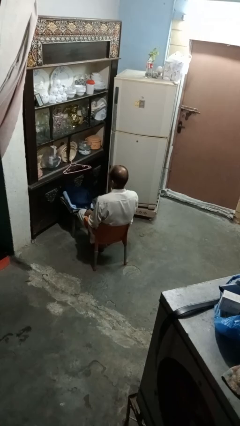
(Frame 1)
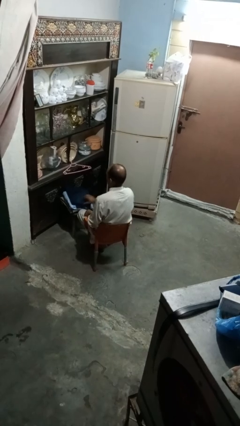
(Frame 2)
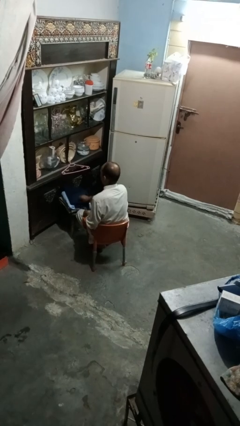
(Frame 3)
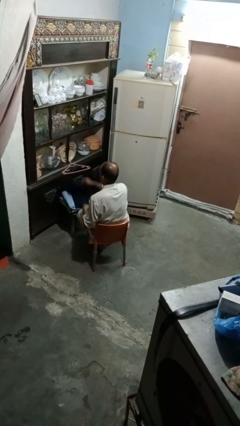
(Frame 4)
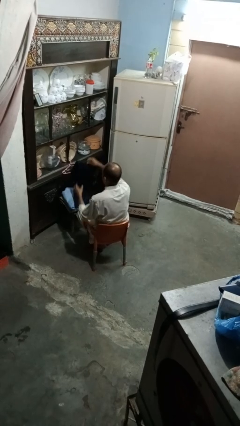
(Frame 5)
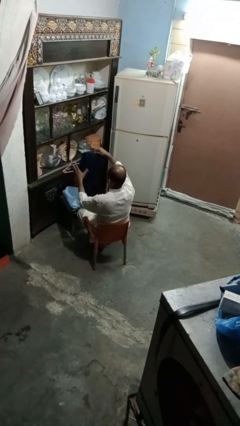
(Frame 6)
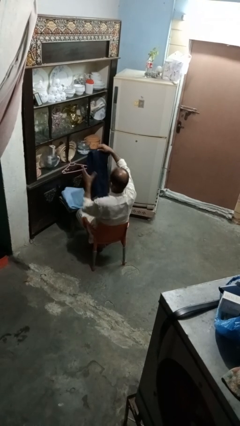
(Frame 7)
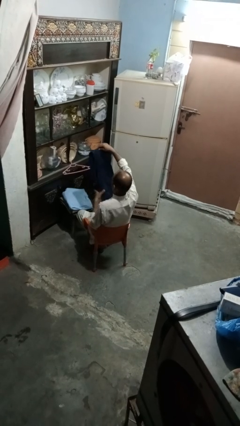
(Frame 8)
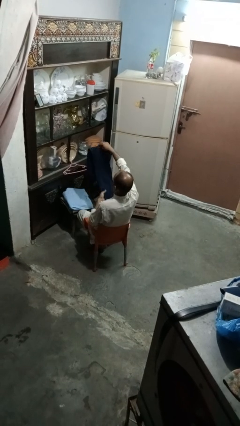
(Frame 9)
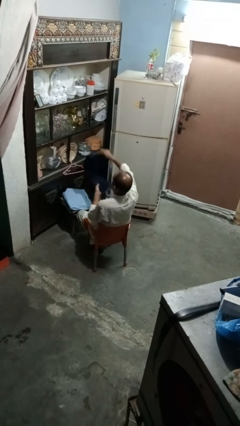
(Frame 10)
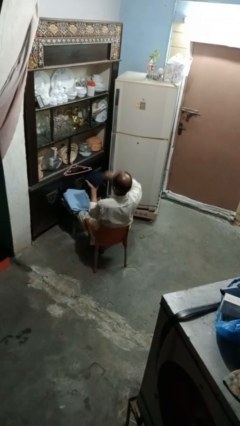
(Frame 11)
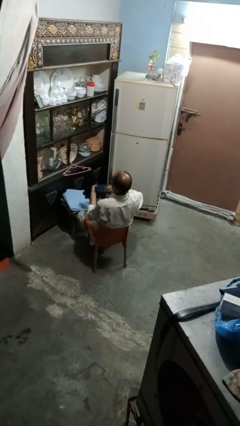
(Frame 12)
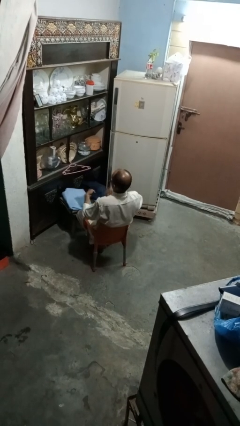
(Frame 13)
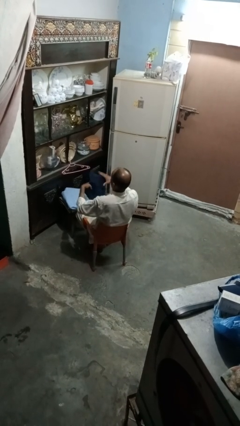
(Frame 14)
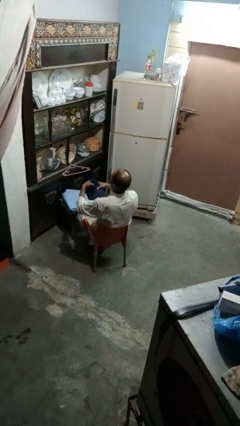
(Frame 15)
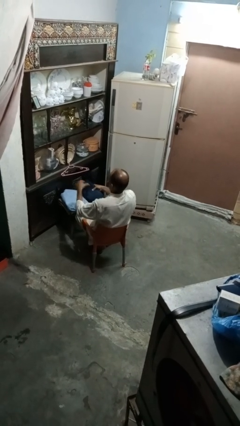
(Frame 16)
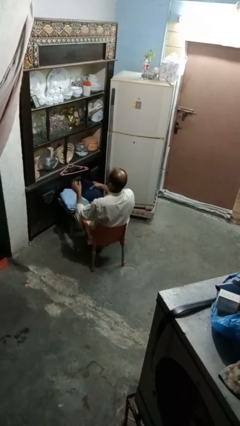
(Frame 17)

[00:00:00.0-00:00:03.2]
person folds pants

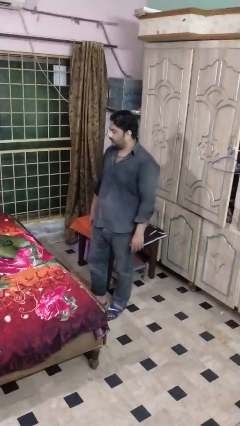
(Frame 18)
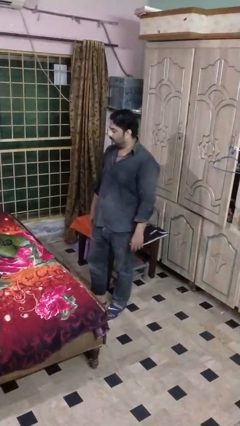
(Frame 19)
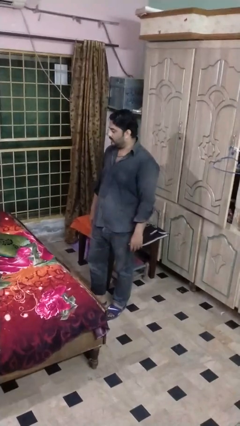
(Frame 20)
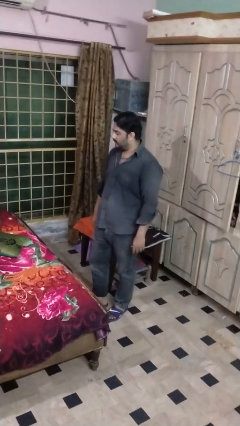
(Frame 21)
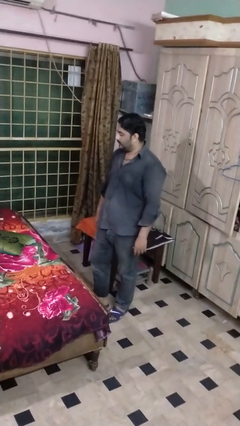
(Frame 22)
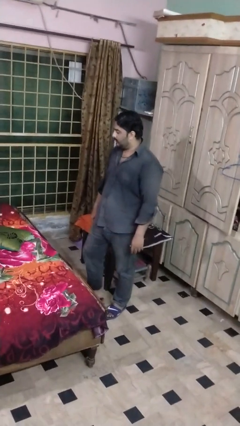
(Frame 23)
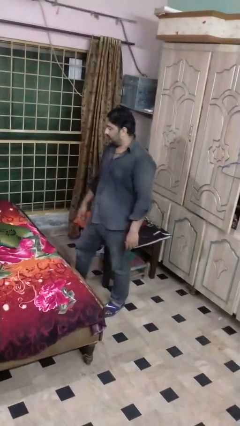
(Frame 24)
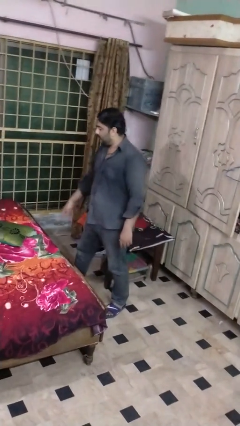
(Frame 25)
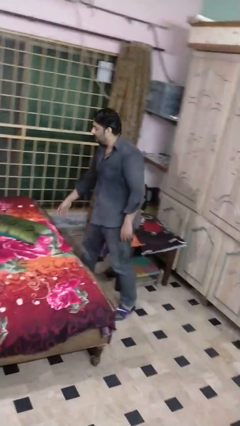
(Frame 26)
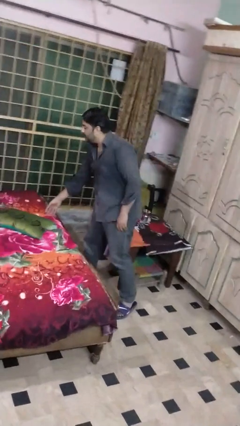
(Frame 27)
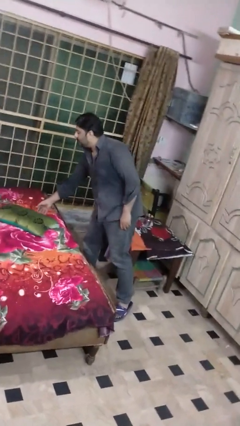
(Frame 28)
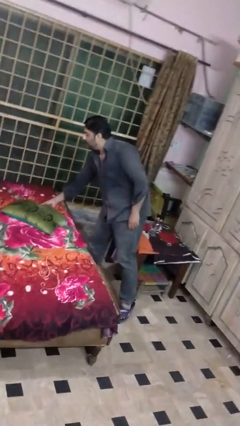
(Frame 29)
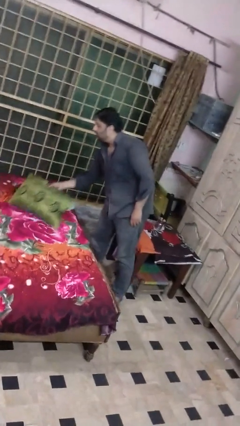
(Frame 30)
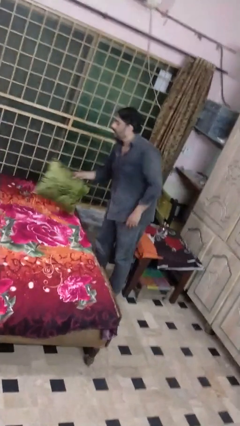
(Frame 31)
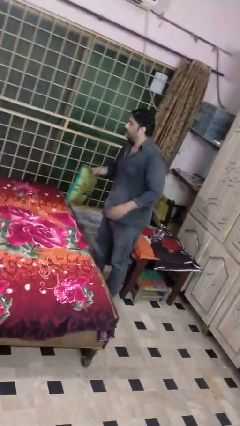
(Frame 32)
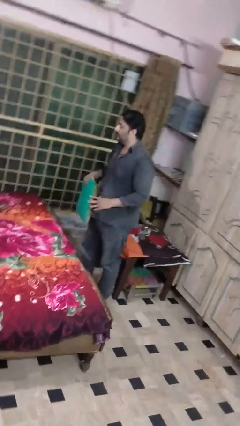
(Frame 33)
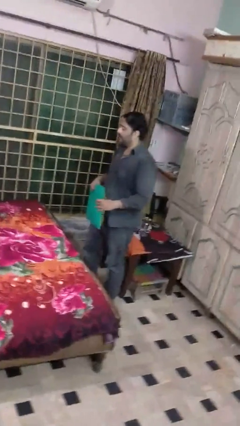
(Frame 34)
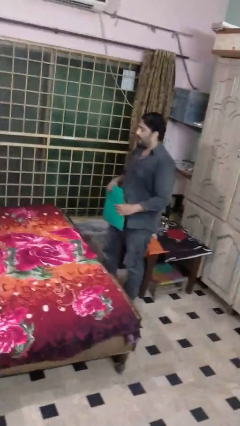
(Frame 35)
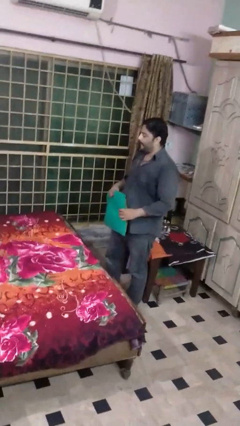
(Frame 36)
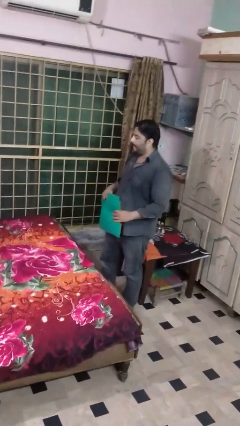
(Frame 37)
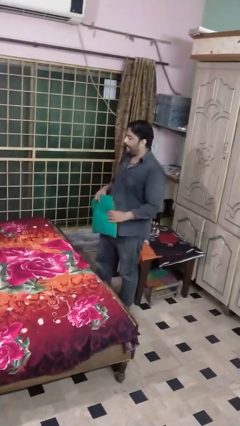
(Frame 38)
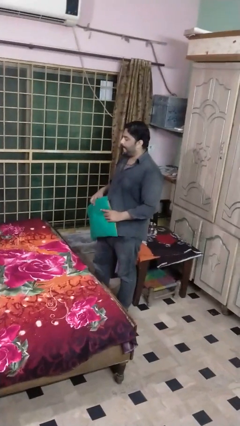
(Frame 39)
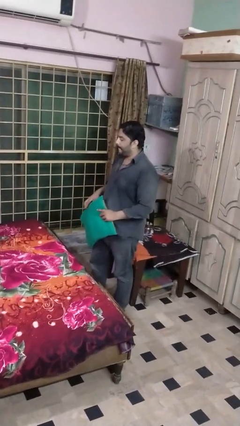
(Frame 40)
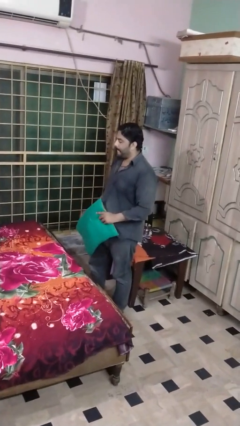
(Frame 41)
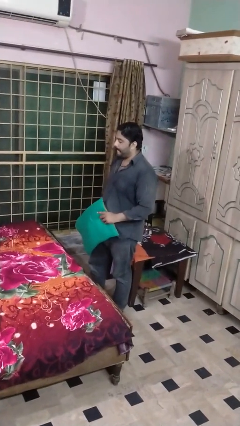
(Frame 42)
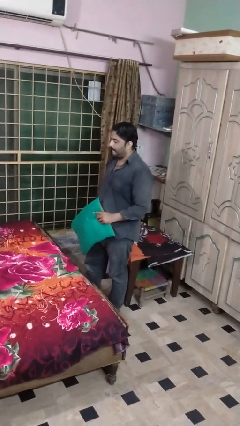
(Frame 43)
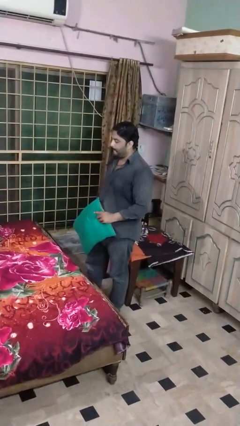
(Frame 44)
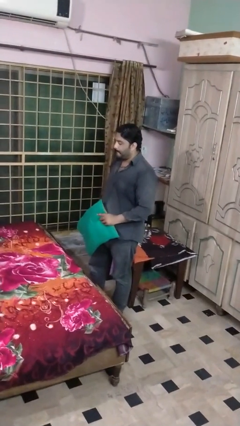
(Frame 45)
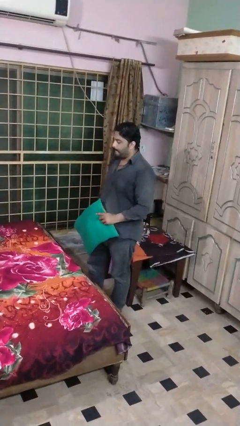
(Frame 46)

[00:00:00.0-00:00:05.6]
person picks up object from bed

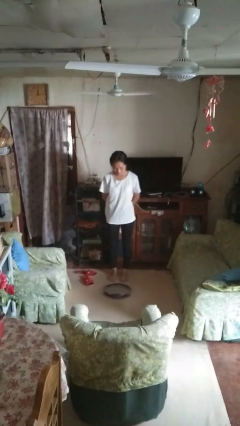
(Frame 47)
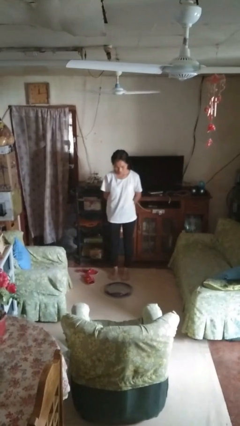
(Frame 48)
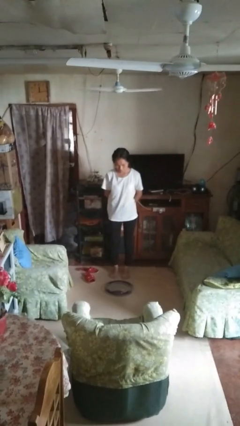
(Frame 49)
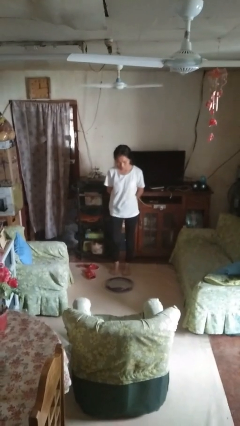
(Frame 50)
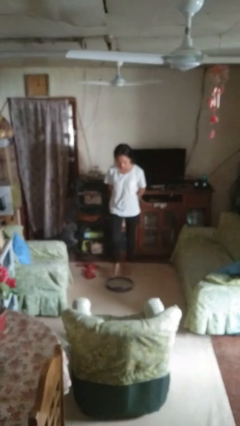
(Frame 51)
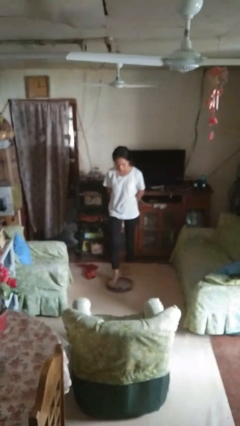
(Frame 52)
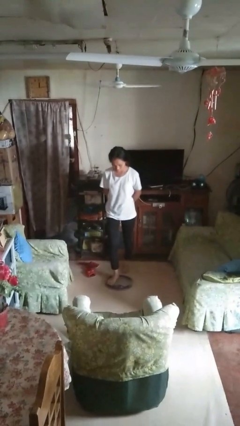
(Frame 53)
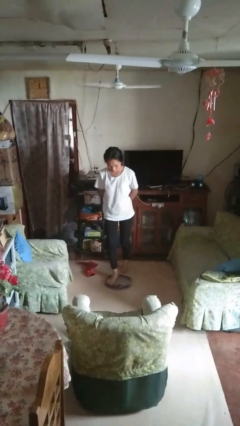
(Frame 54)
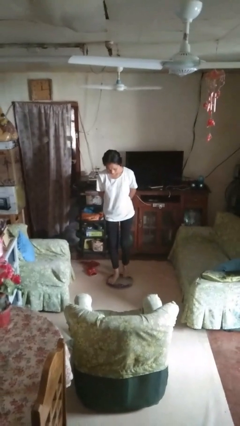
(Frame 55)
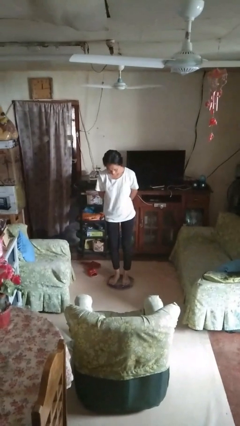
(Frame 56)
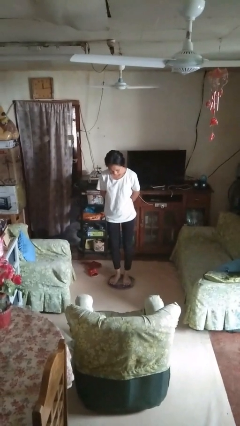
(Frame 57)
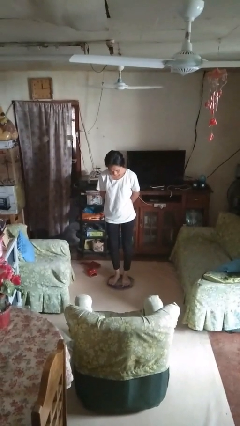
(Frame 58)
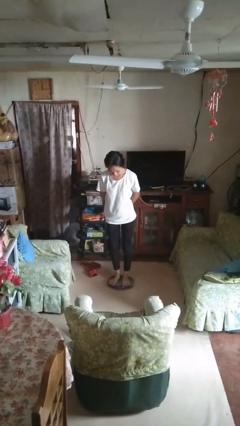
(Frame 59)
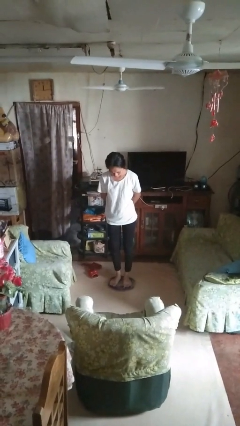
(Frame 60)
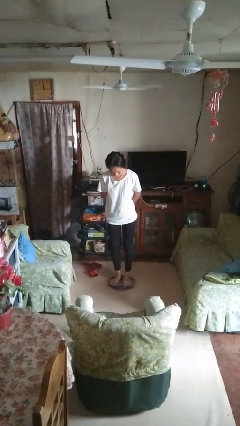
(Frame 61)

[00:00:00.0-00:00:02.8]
person uses bodyweight scale

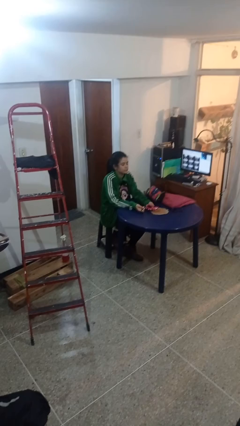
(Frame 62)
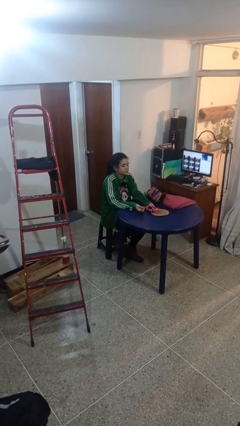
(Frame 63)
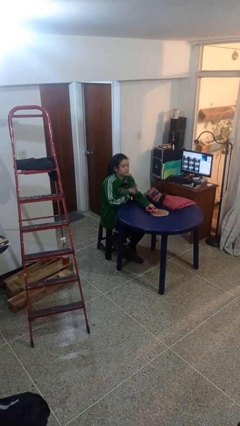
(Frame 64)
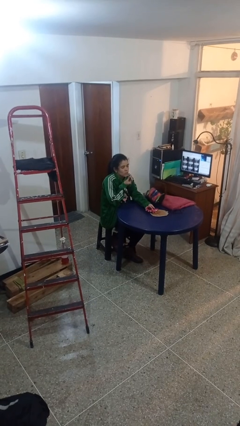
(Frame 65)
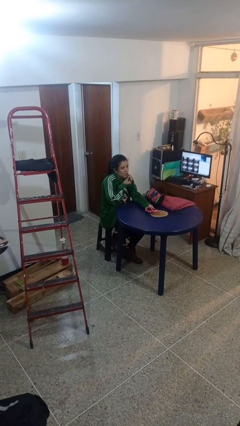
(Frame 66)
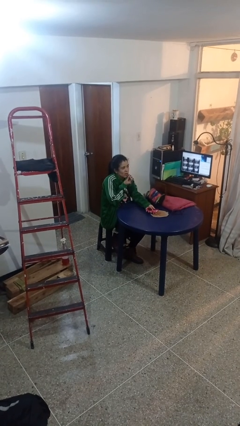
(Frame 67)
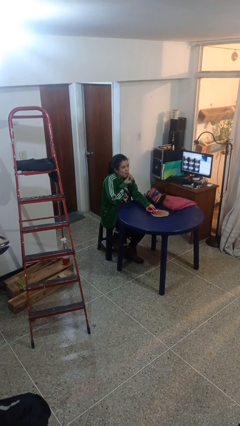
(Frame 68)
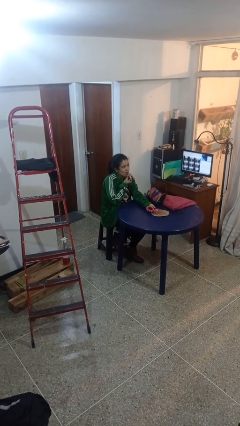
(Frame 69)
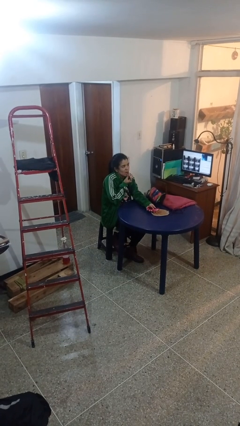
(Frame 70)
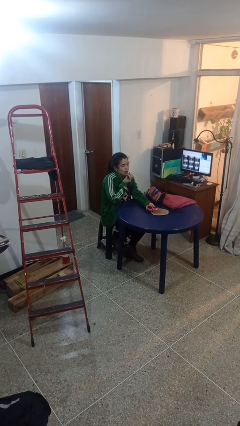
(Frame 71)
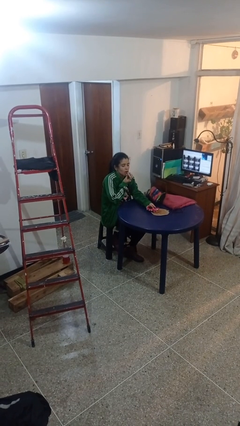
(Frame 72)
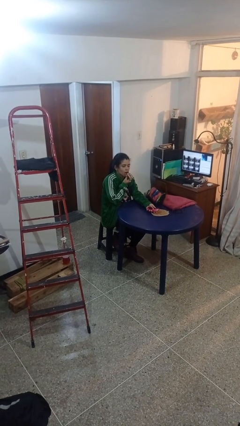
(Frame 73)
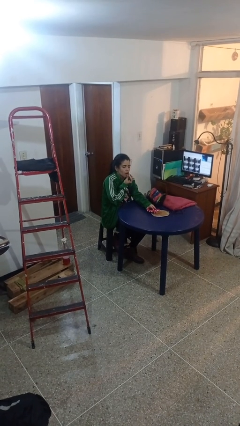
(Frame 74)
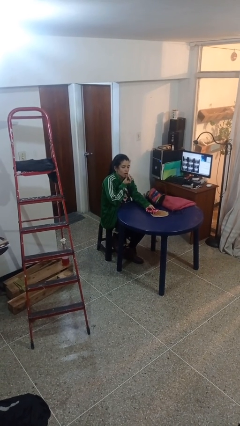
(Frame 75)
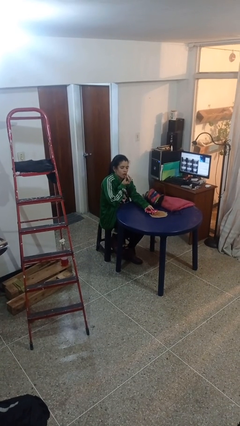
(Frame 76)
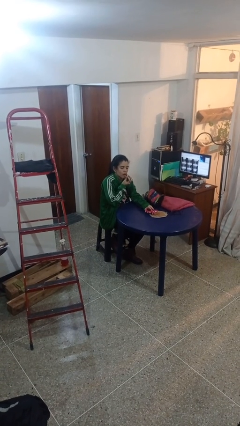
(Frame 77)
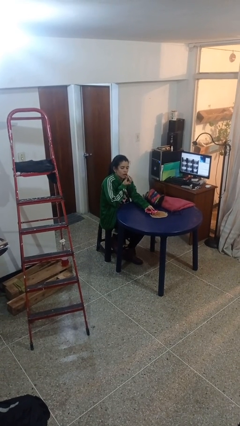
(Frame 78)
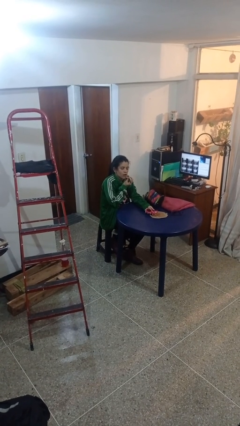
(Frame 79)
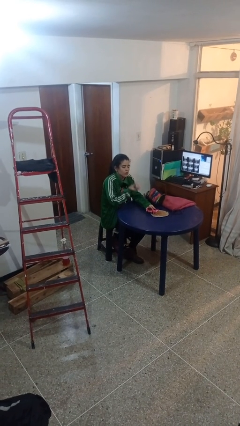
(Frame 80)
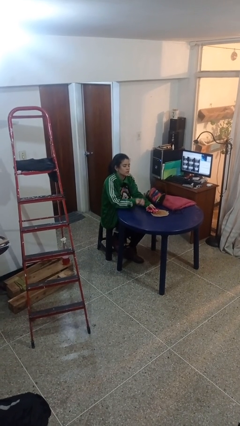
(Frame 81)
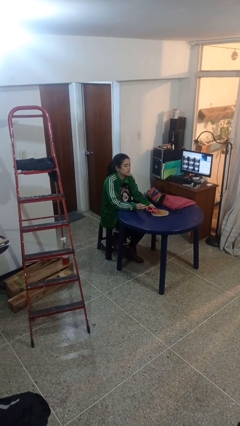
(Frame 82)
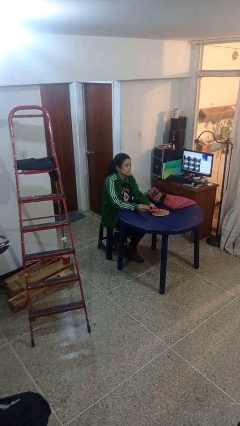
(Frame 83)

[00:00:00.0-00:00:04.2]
person applies lip makeup

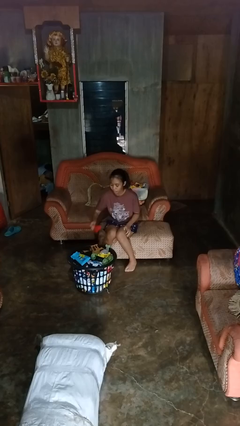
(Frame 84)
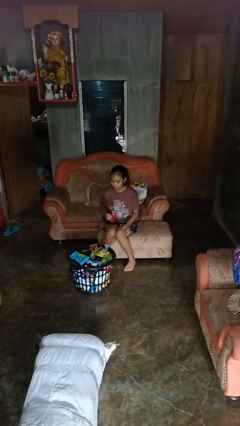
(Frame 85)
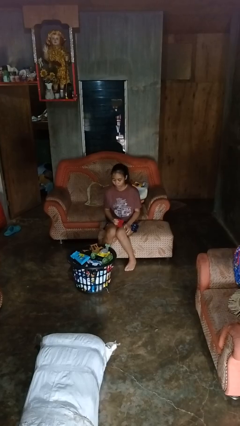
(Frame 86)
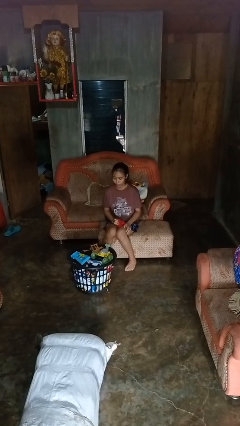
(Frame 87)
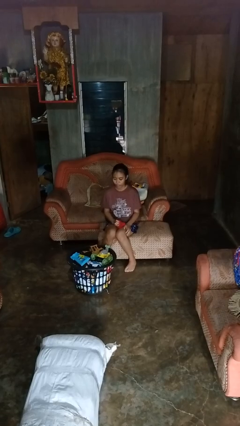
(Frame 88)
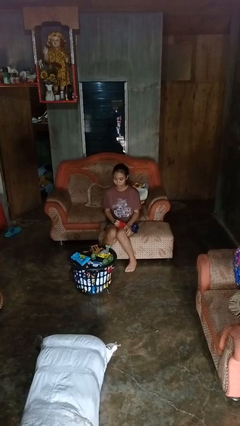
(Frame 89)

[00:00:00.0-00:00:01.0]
person takes object from basket

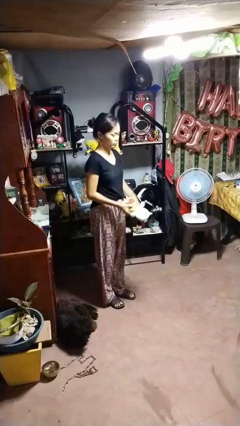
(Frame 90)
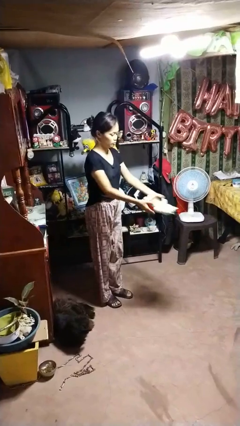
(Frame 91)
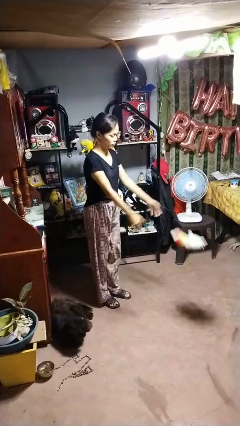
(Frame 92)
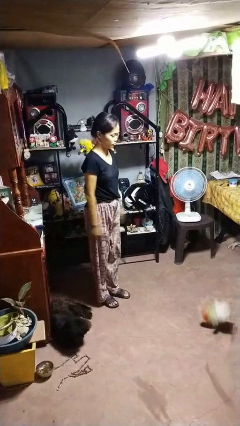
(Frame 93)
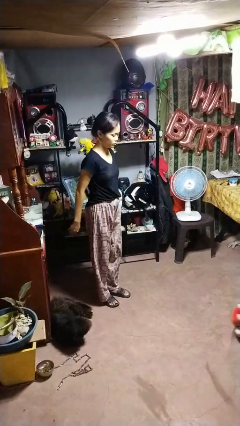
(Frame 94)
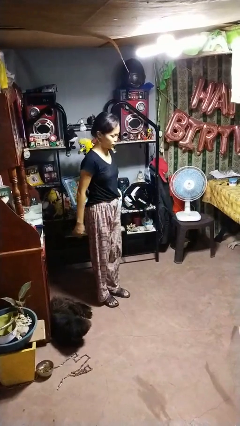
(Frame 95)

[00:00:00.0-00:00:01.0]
person throws object to ground
